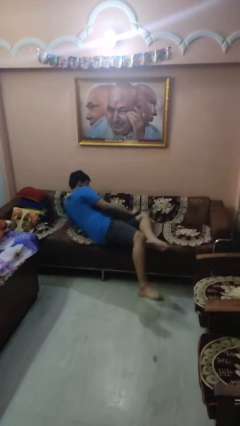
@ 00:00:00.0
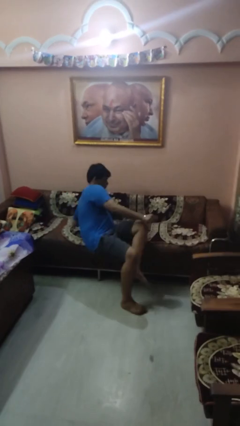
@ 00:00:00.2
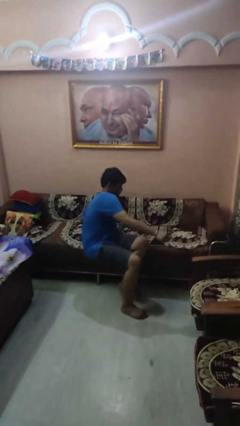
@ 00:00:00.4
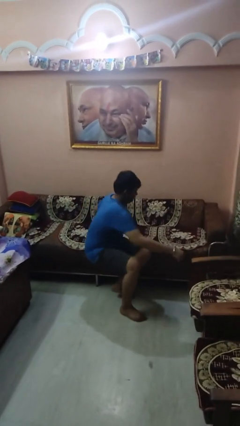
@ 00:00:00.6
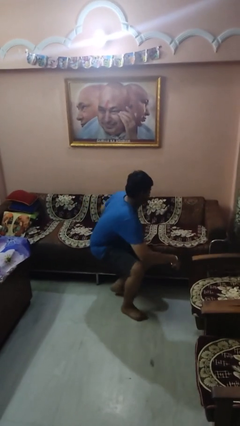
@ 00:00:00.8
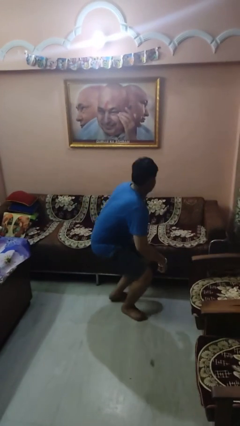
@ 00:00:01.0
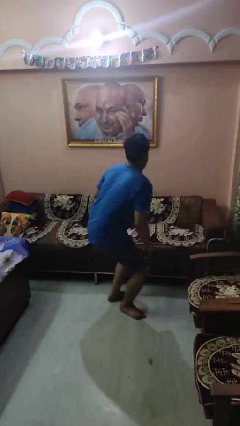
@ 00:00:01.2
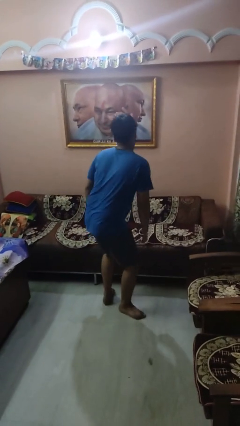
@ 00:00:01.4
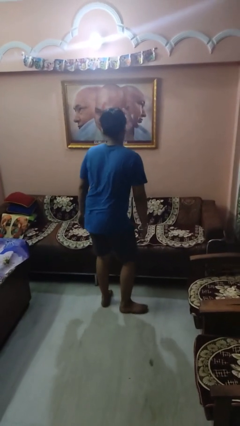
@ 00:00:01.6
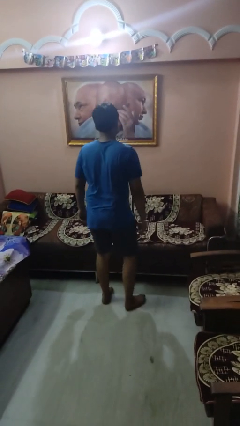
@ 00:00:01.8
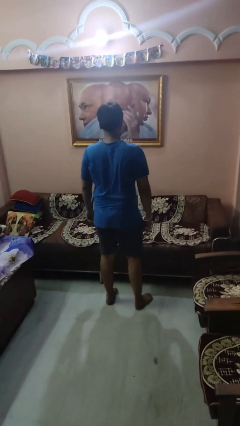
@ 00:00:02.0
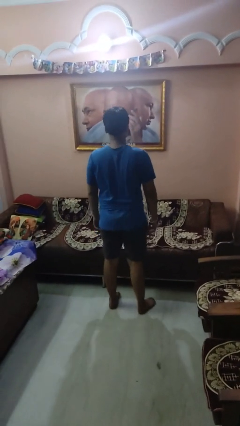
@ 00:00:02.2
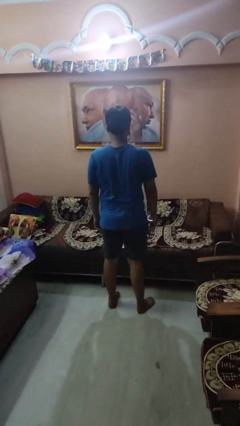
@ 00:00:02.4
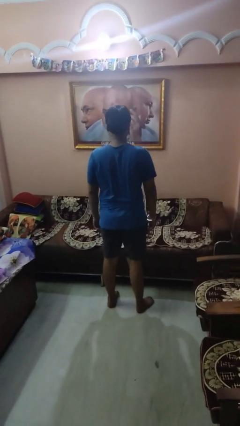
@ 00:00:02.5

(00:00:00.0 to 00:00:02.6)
person stands up

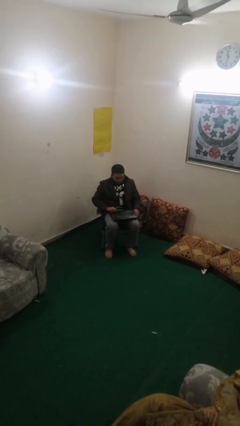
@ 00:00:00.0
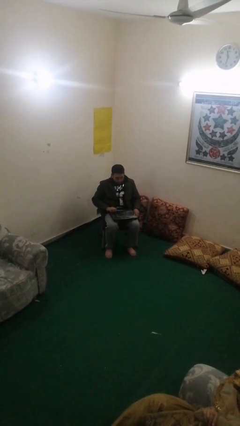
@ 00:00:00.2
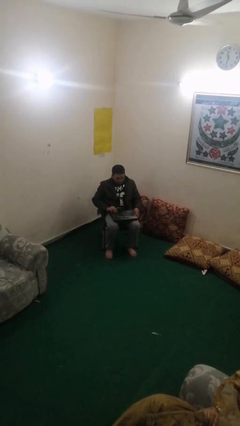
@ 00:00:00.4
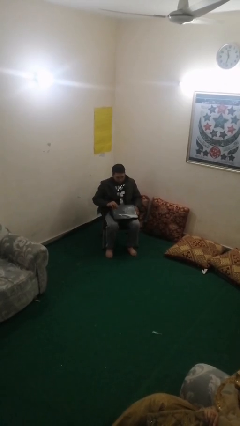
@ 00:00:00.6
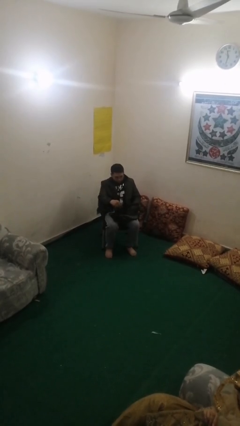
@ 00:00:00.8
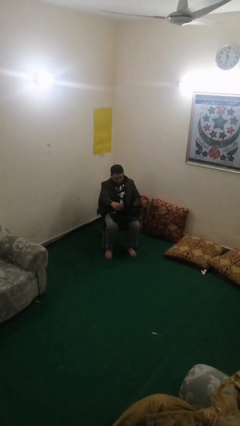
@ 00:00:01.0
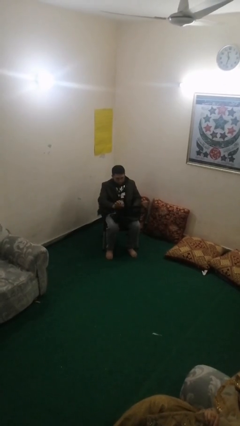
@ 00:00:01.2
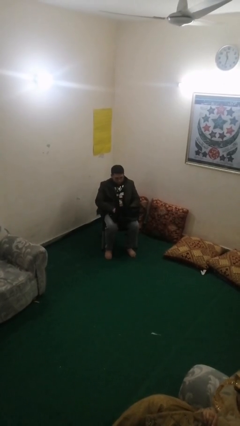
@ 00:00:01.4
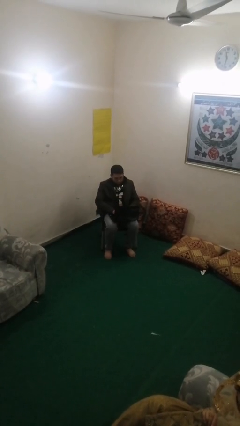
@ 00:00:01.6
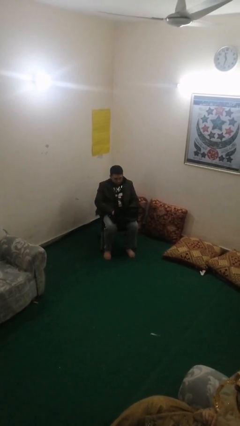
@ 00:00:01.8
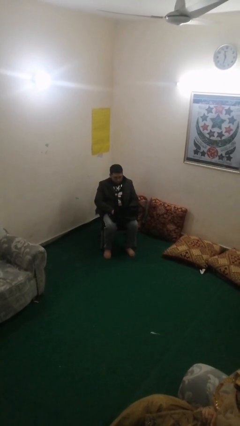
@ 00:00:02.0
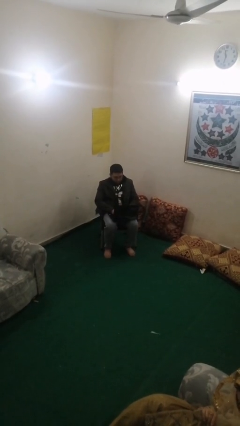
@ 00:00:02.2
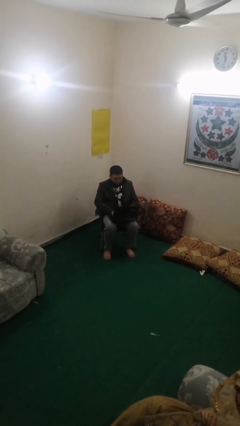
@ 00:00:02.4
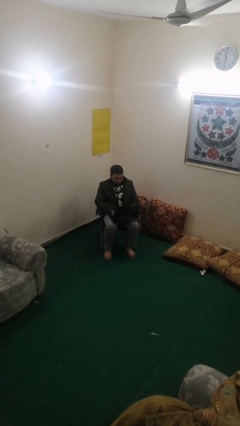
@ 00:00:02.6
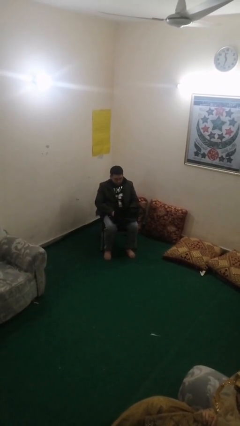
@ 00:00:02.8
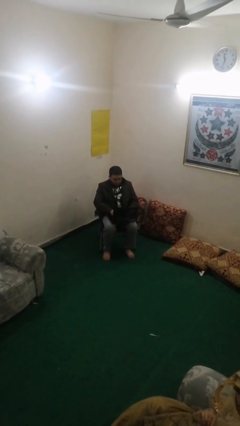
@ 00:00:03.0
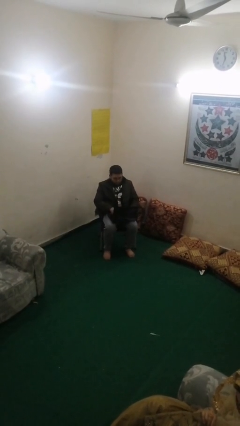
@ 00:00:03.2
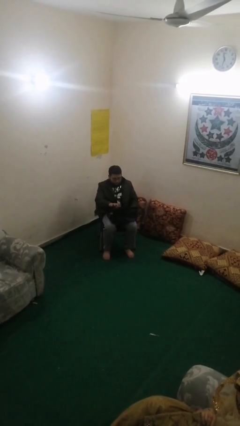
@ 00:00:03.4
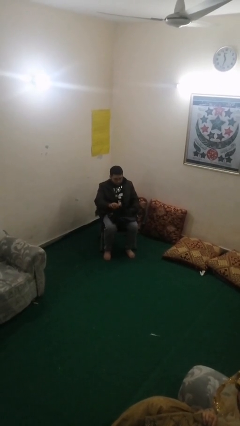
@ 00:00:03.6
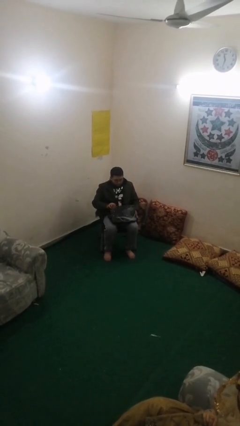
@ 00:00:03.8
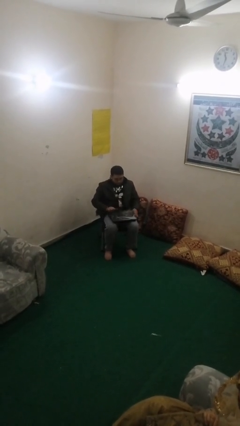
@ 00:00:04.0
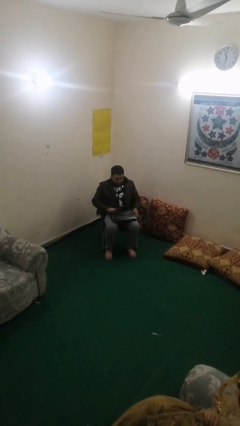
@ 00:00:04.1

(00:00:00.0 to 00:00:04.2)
person interacts with laptop

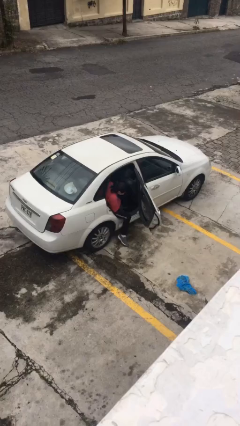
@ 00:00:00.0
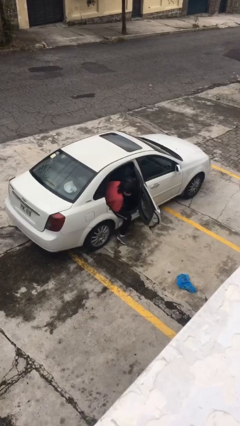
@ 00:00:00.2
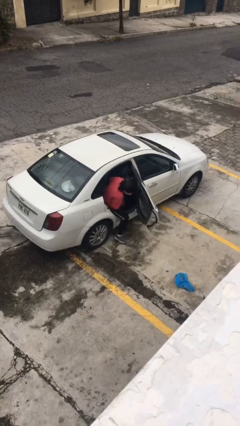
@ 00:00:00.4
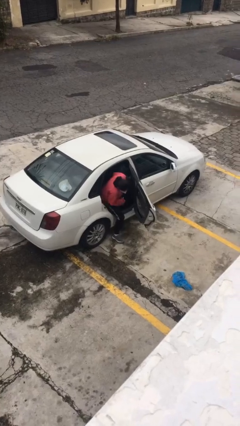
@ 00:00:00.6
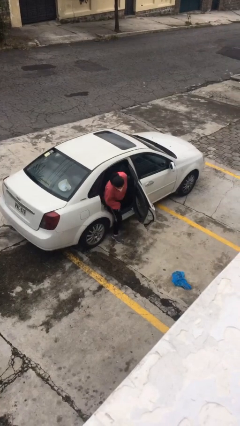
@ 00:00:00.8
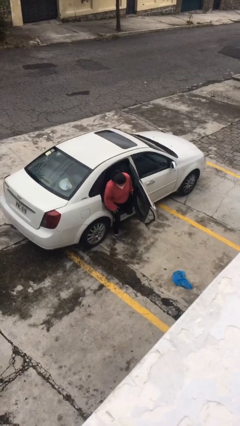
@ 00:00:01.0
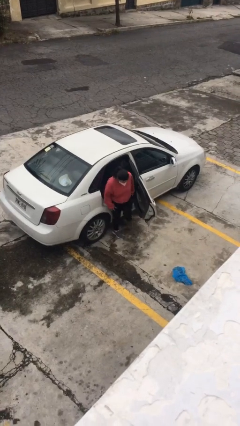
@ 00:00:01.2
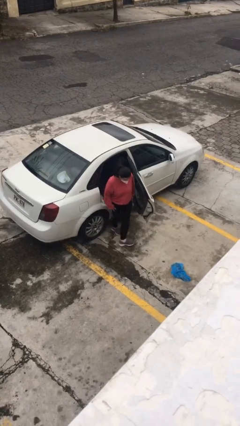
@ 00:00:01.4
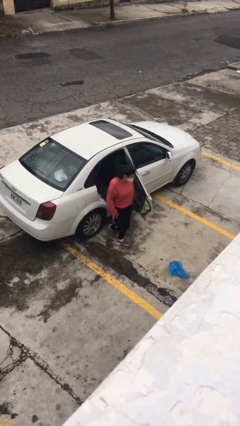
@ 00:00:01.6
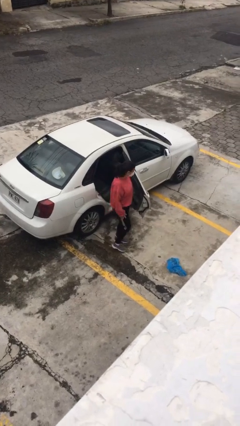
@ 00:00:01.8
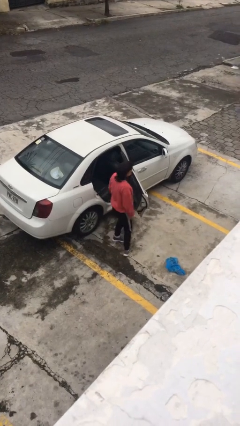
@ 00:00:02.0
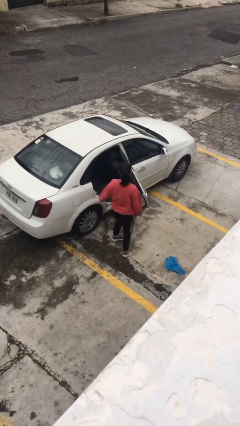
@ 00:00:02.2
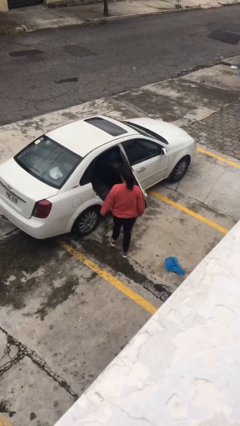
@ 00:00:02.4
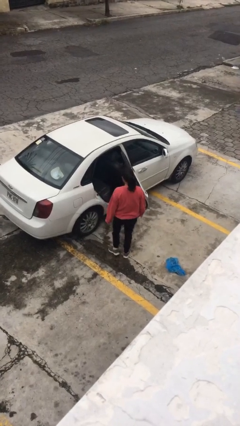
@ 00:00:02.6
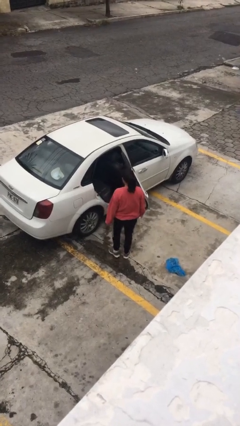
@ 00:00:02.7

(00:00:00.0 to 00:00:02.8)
person exits car

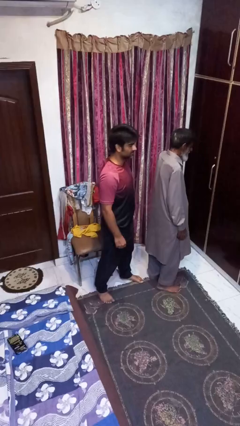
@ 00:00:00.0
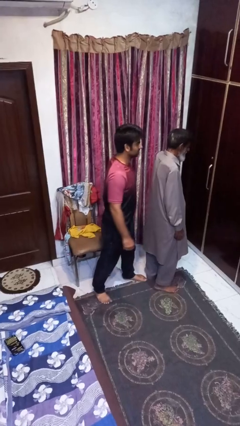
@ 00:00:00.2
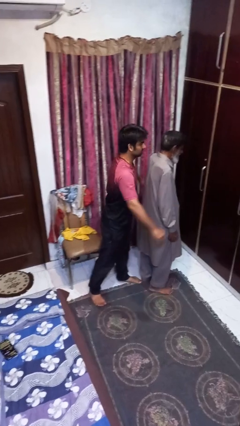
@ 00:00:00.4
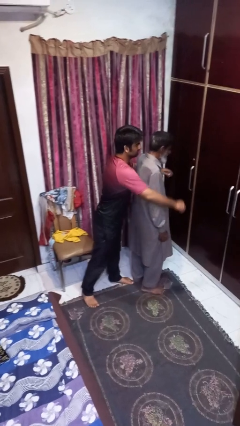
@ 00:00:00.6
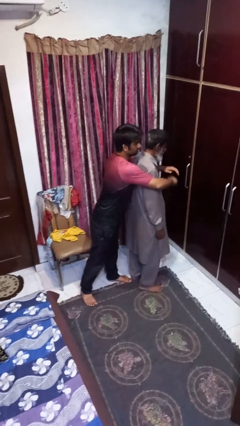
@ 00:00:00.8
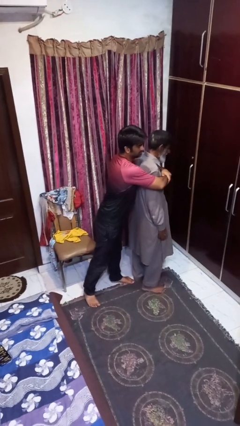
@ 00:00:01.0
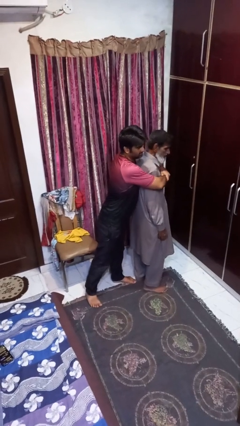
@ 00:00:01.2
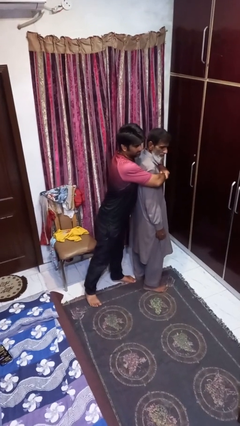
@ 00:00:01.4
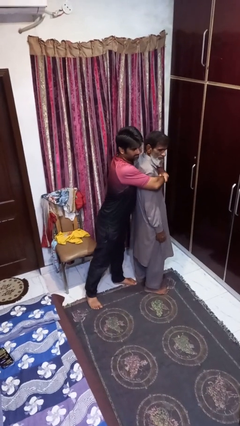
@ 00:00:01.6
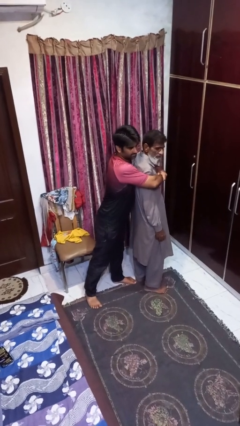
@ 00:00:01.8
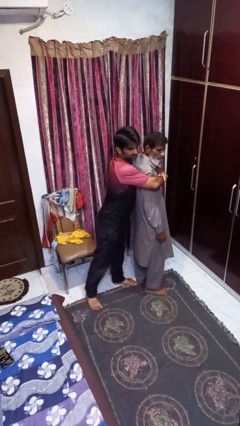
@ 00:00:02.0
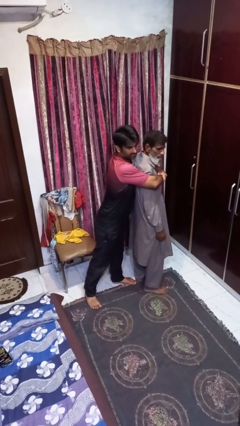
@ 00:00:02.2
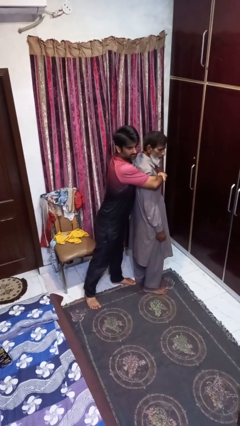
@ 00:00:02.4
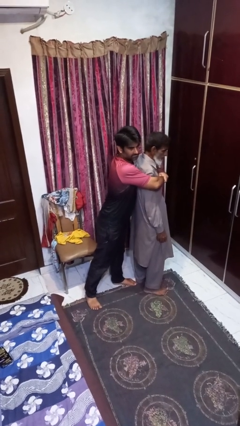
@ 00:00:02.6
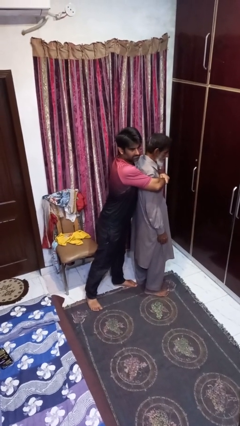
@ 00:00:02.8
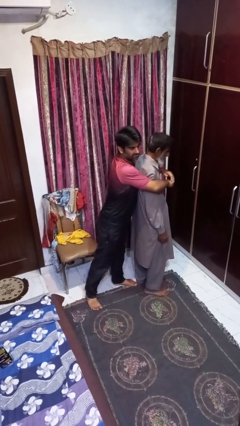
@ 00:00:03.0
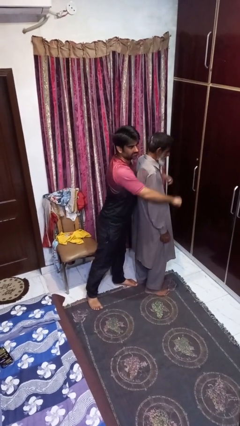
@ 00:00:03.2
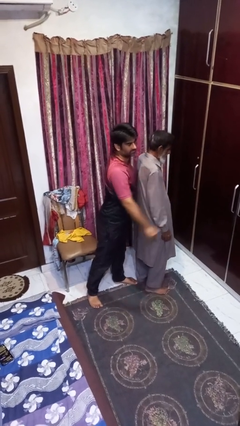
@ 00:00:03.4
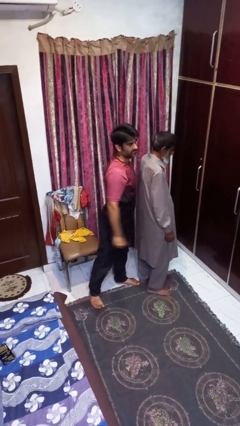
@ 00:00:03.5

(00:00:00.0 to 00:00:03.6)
person hugs person from behind

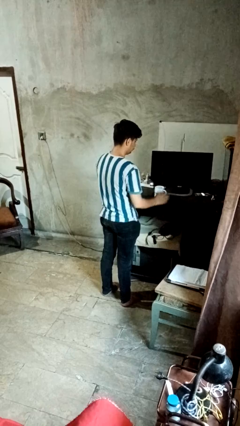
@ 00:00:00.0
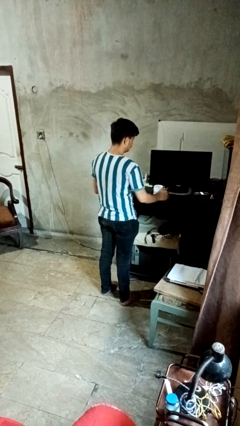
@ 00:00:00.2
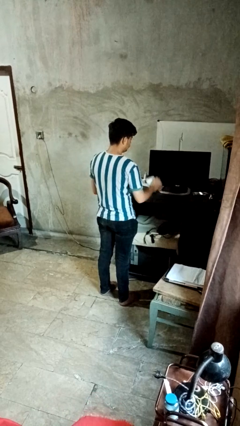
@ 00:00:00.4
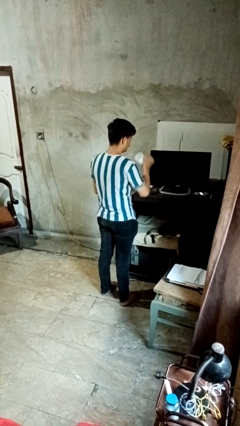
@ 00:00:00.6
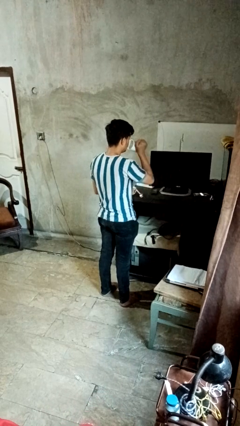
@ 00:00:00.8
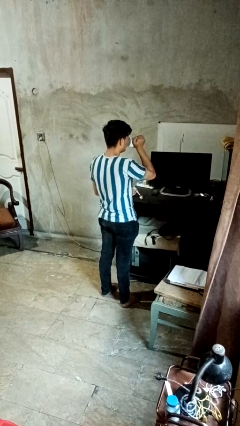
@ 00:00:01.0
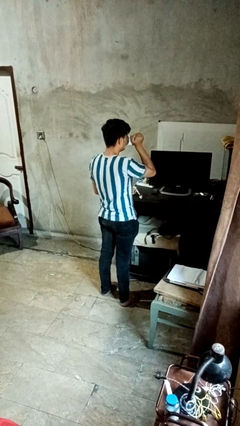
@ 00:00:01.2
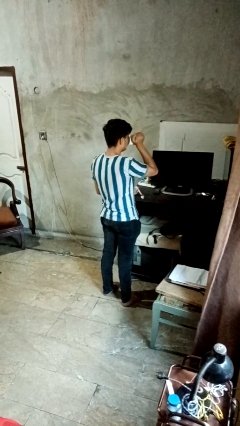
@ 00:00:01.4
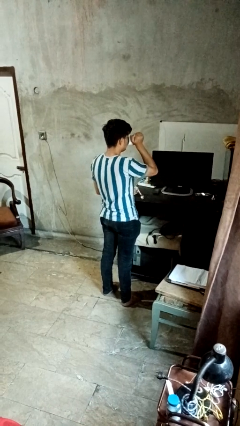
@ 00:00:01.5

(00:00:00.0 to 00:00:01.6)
person drinks from mug

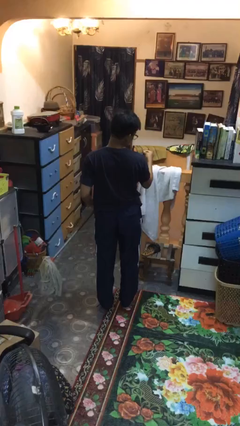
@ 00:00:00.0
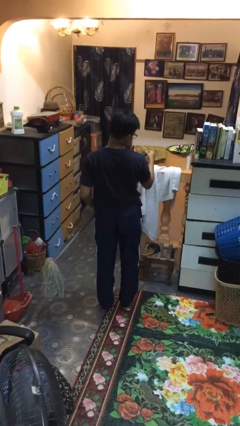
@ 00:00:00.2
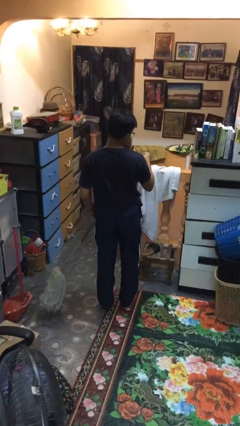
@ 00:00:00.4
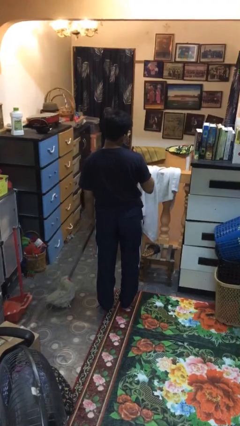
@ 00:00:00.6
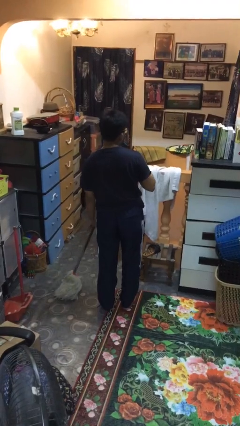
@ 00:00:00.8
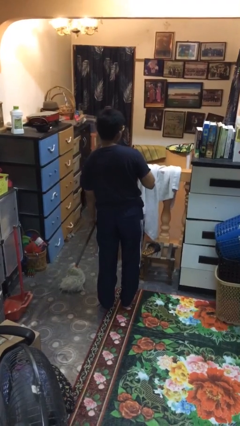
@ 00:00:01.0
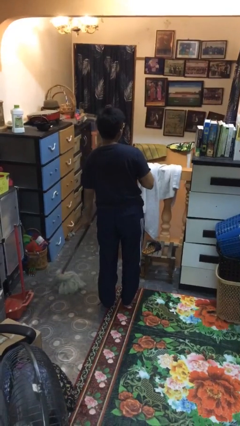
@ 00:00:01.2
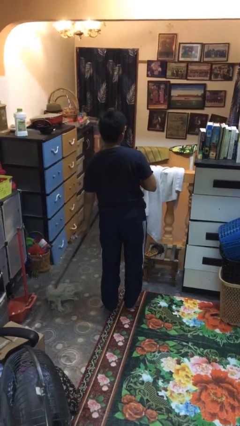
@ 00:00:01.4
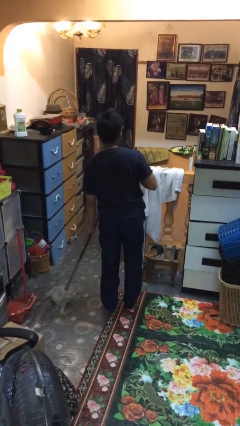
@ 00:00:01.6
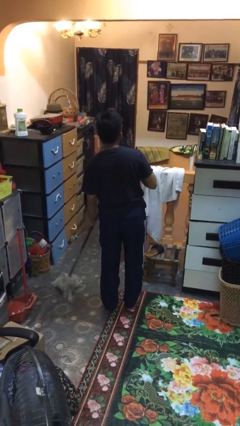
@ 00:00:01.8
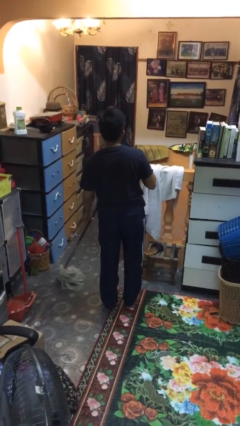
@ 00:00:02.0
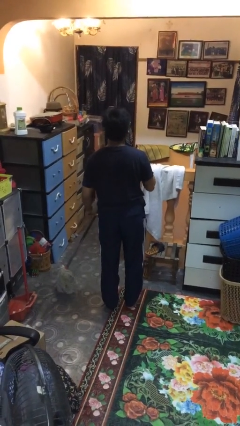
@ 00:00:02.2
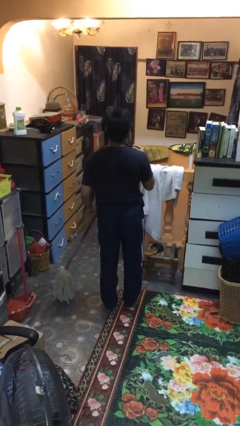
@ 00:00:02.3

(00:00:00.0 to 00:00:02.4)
person mops

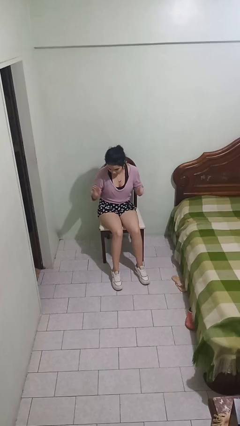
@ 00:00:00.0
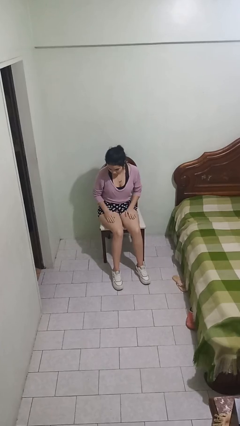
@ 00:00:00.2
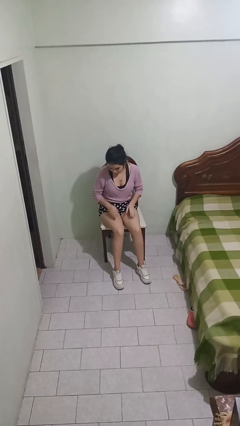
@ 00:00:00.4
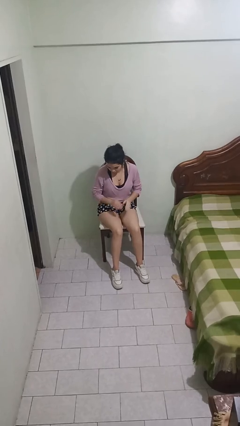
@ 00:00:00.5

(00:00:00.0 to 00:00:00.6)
person slaps hands on thighs